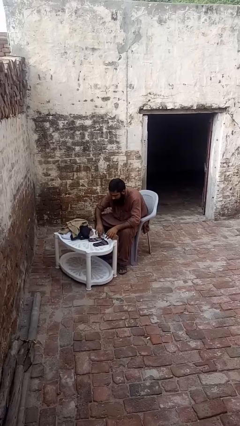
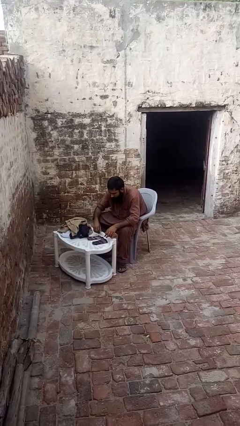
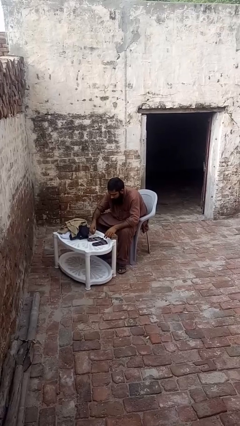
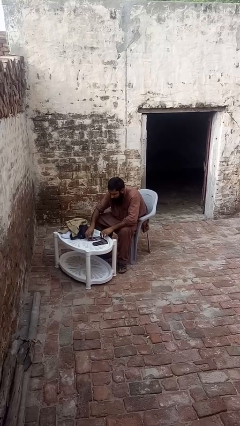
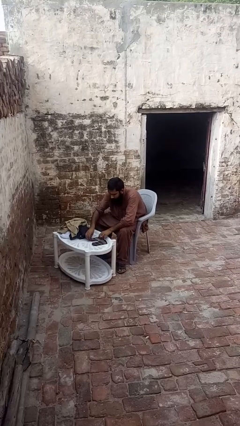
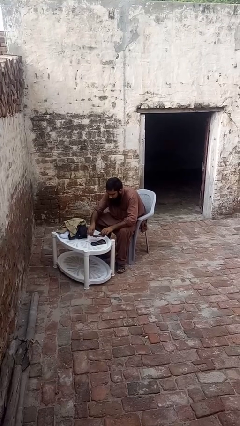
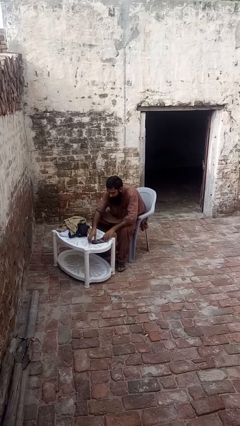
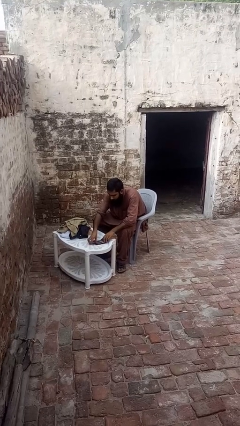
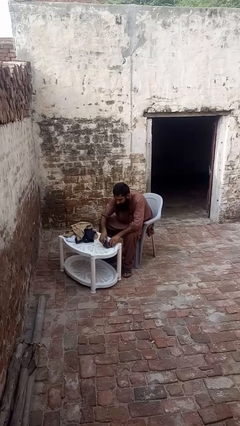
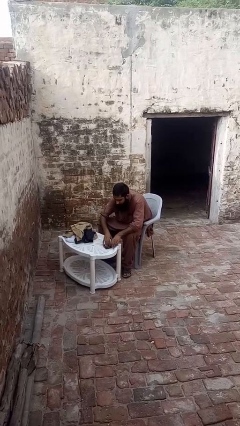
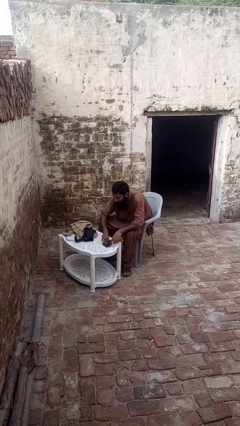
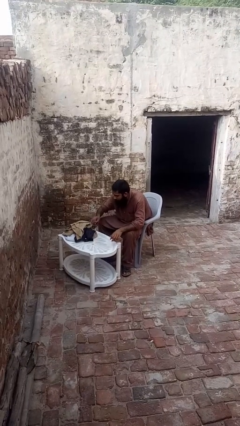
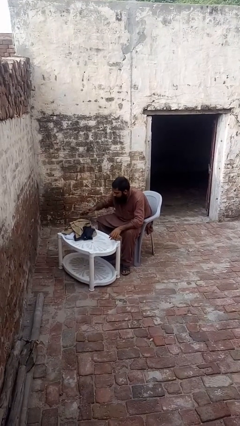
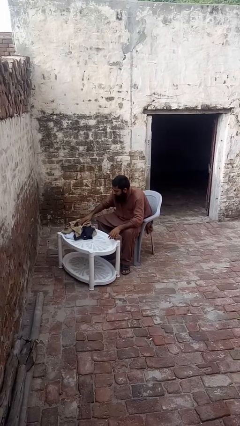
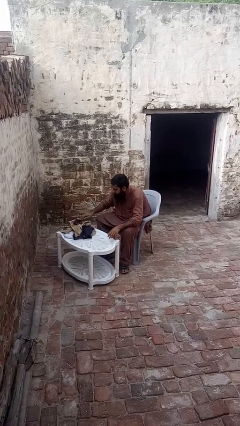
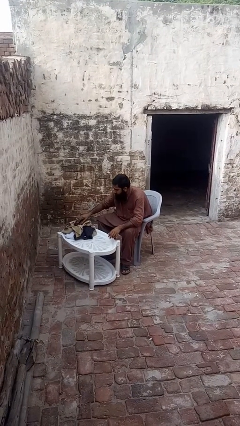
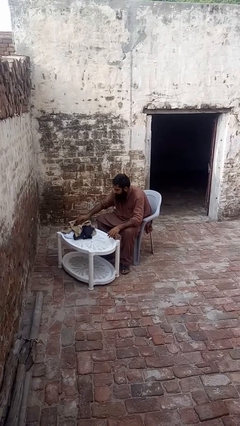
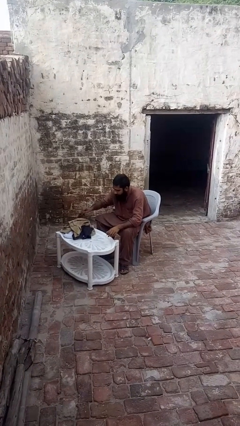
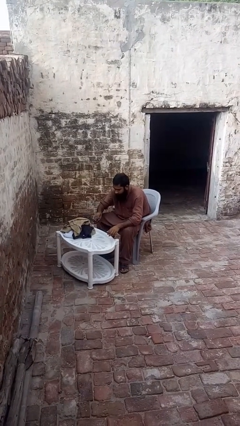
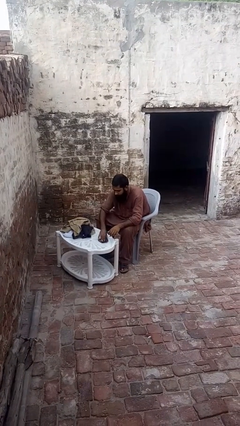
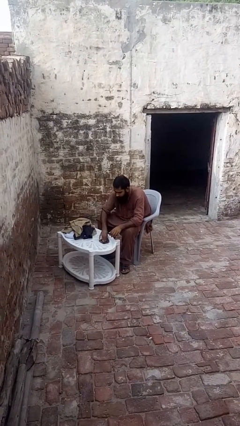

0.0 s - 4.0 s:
person folds socks

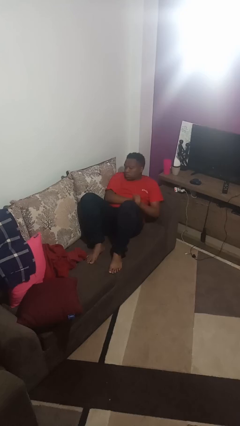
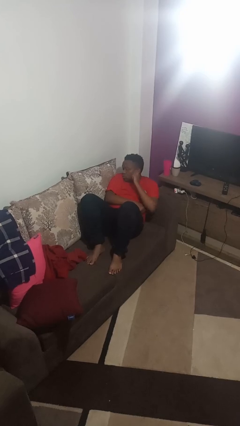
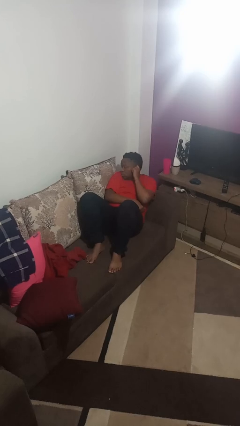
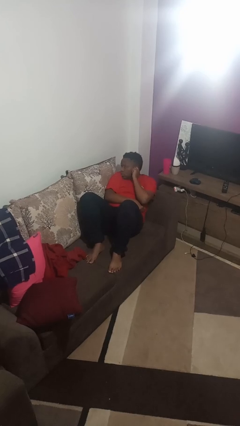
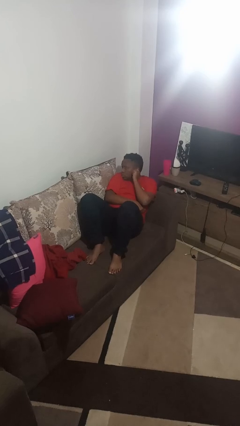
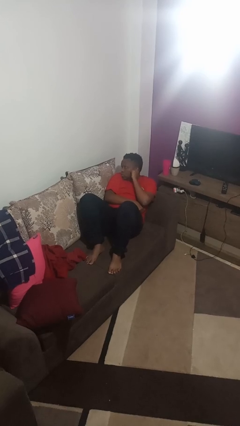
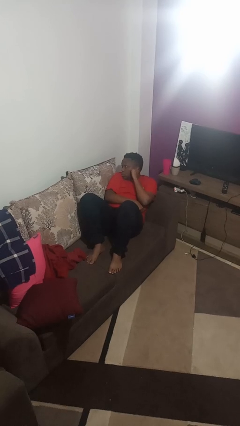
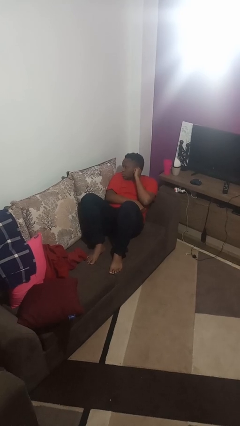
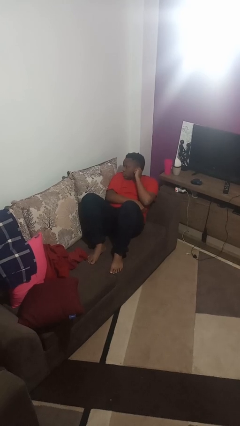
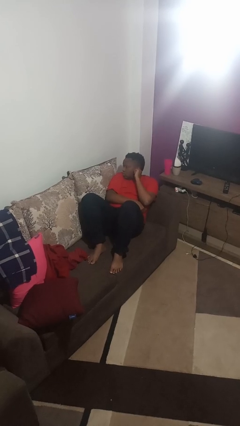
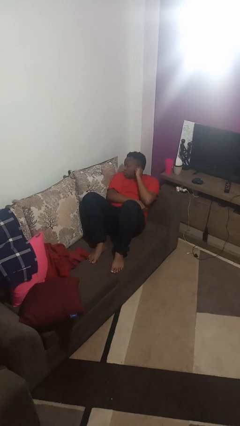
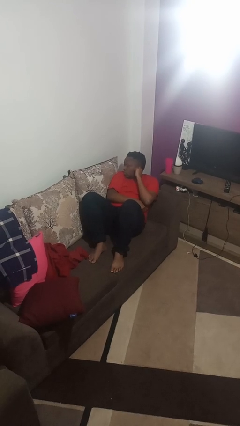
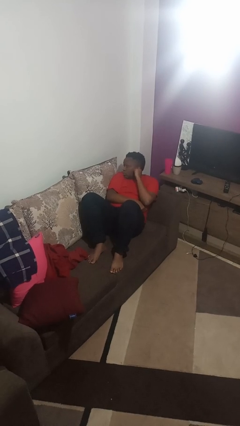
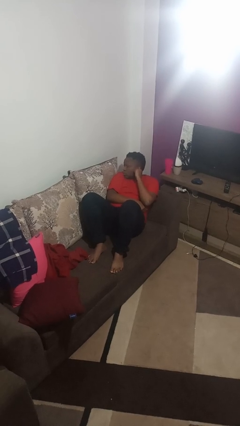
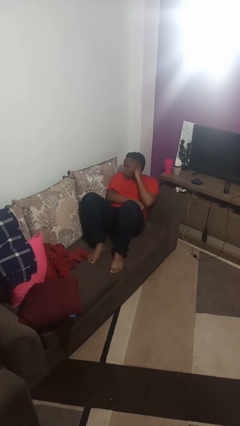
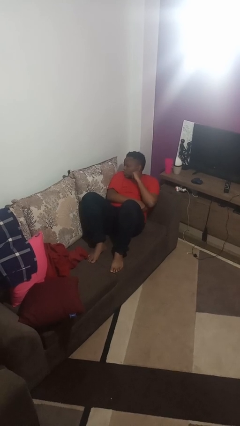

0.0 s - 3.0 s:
person touches earlobe

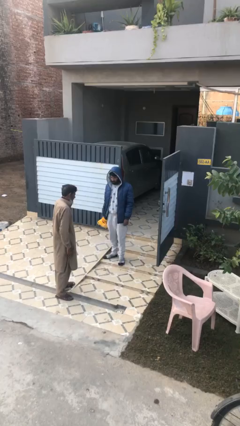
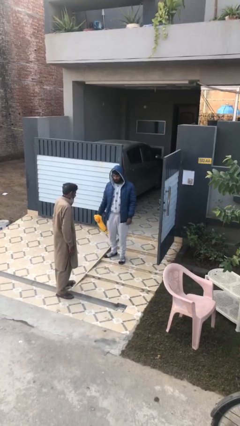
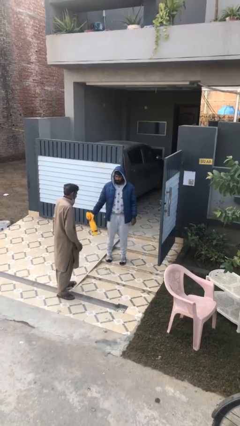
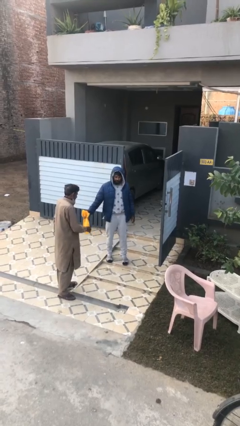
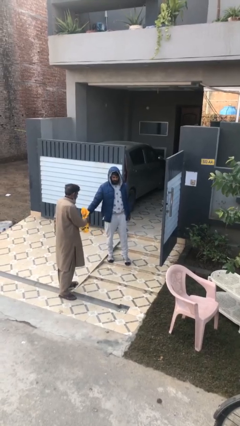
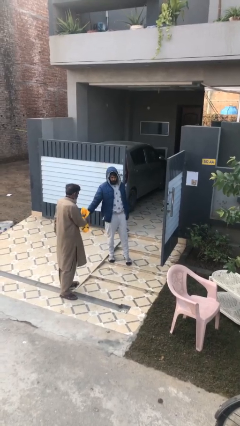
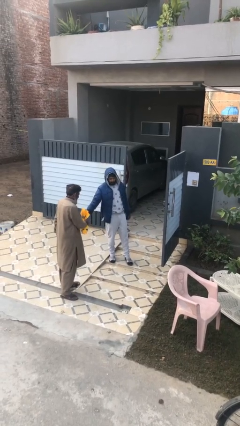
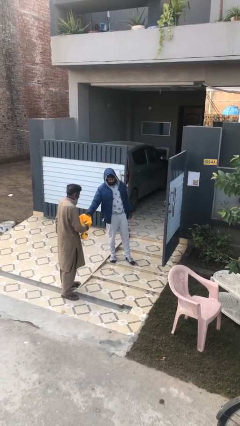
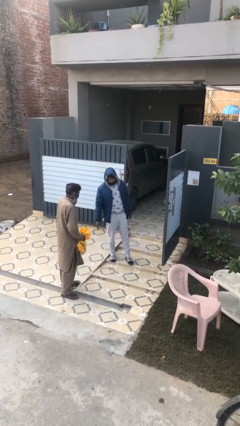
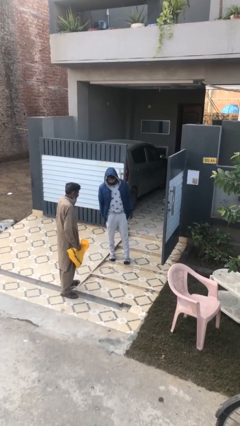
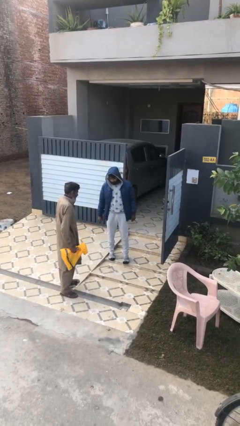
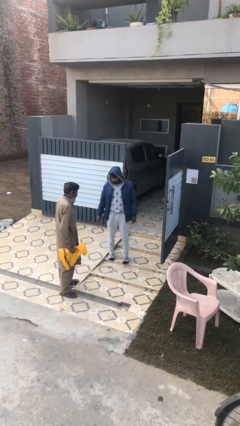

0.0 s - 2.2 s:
person transfers object to person

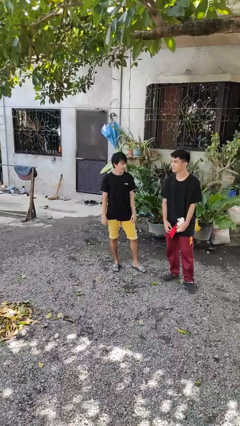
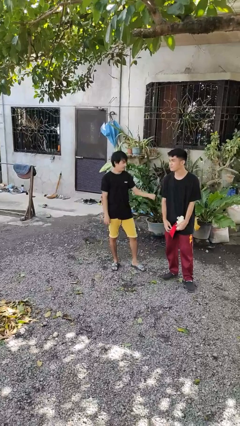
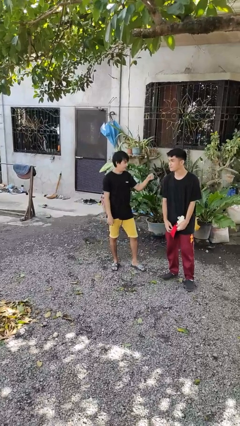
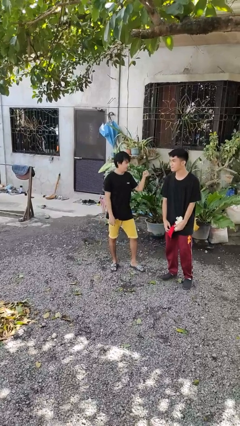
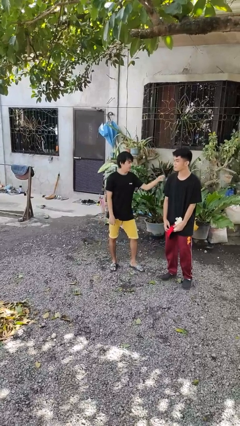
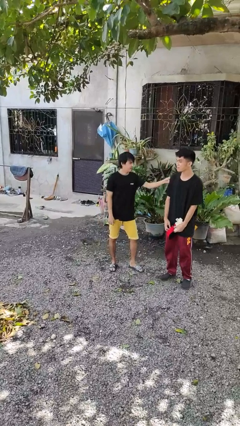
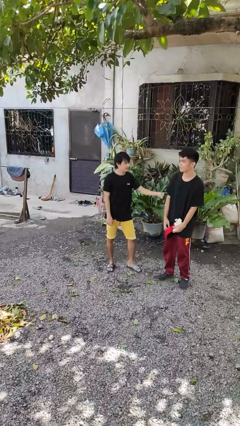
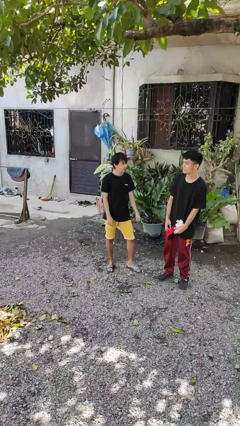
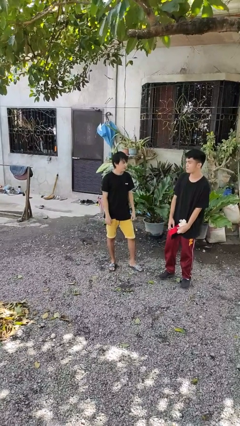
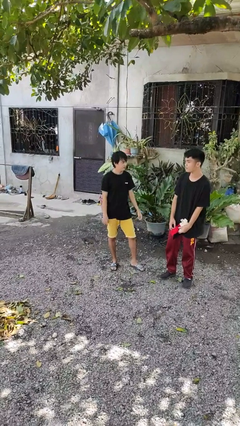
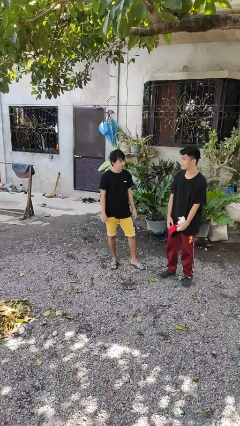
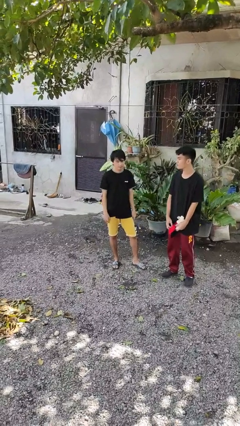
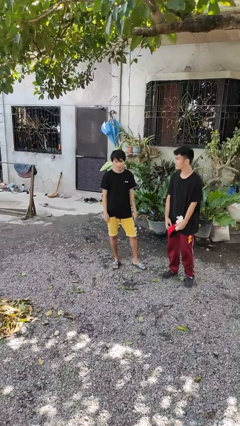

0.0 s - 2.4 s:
person pounds shoulders of person

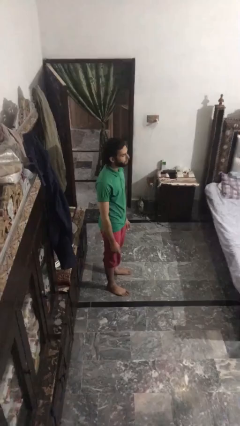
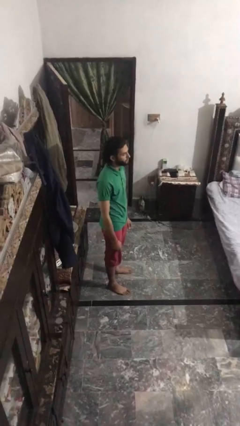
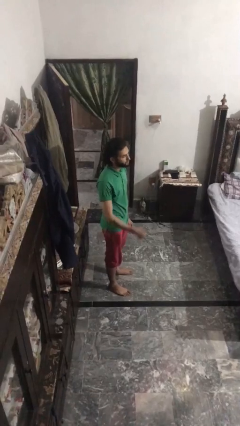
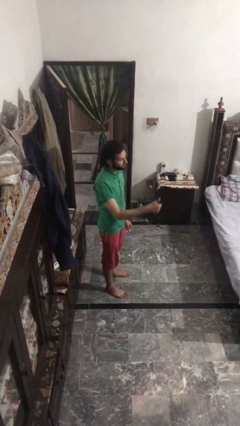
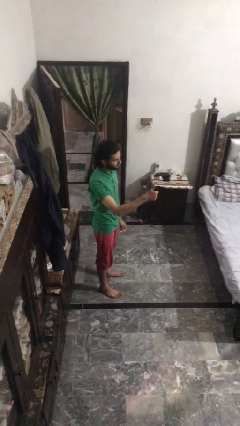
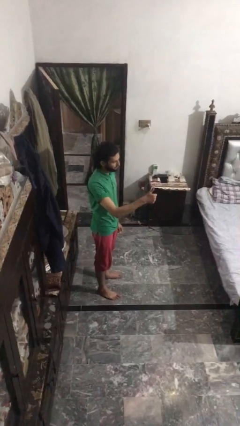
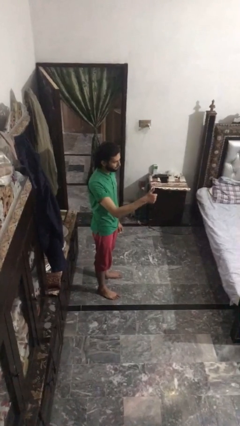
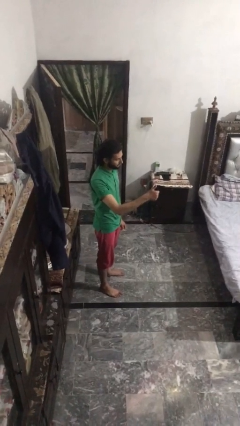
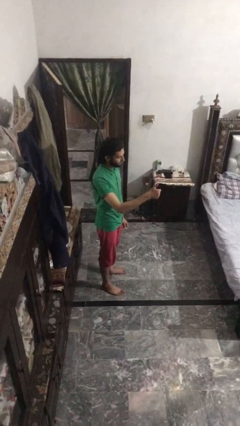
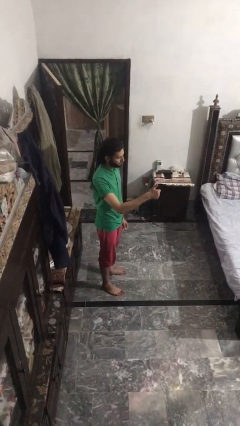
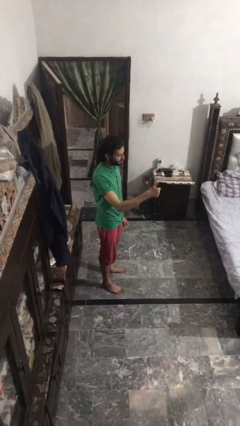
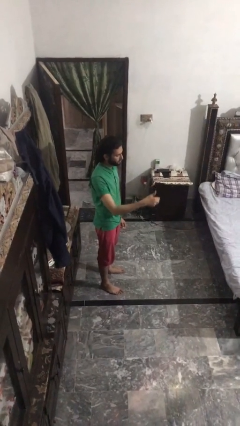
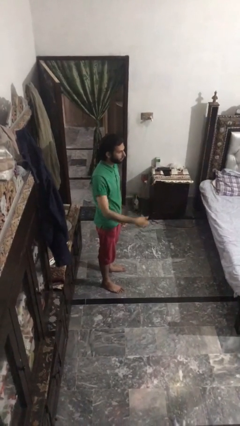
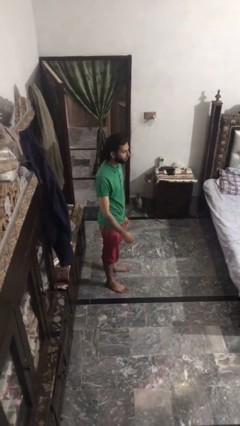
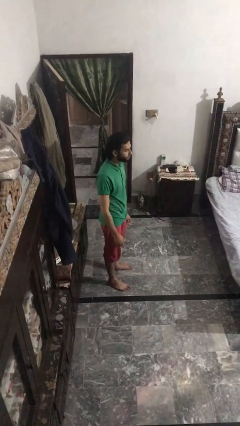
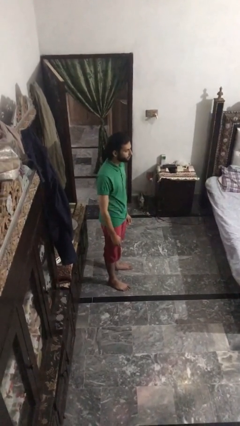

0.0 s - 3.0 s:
person gestures thumbs up

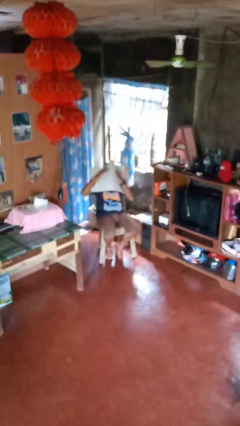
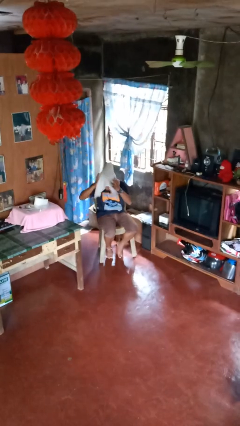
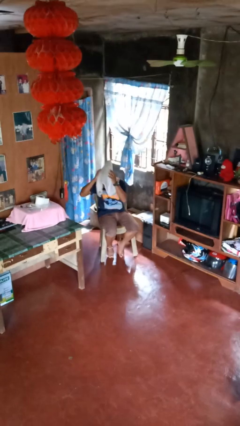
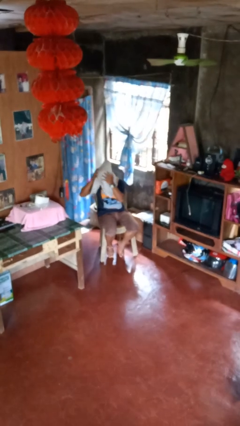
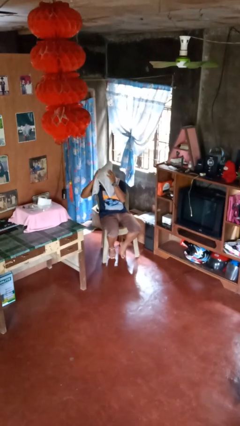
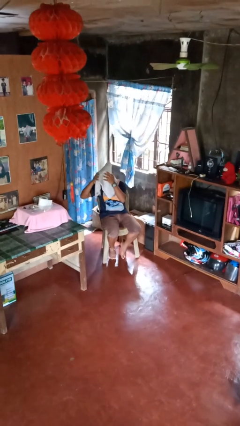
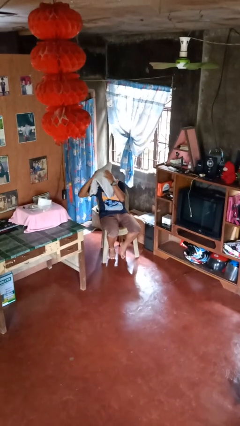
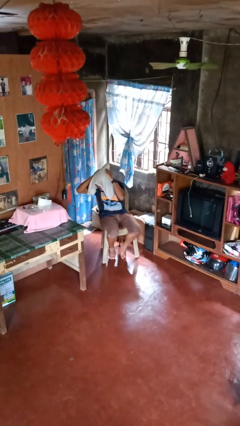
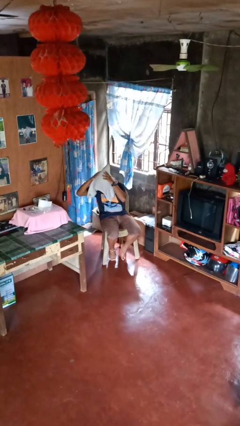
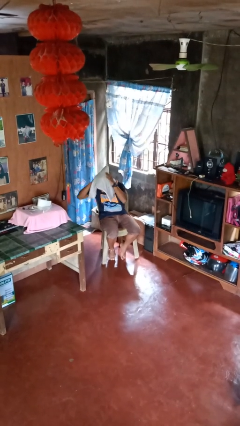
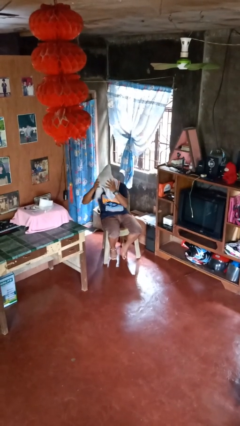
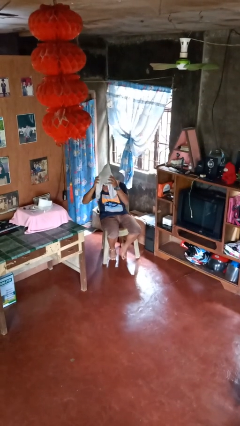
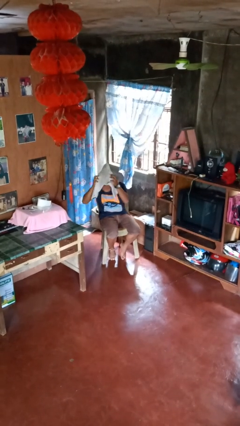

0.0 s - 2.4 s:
person dries hair with towel
